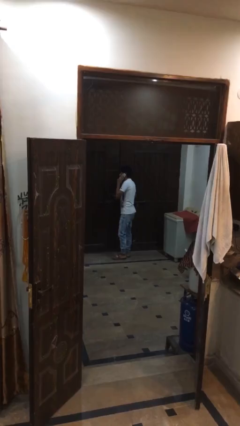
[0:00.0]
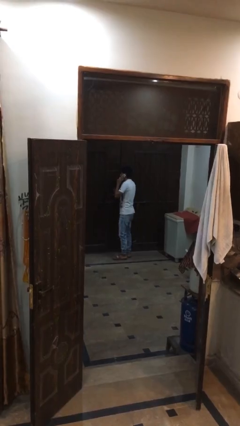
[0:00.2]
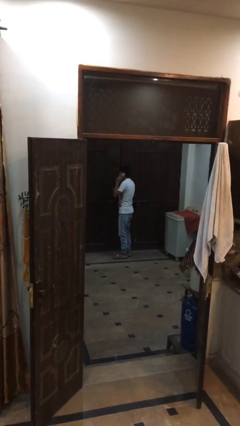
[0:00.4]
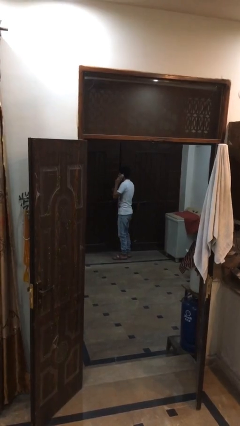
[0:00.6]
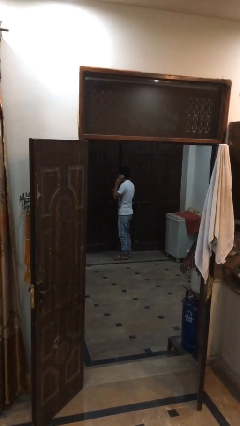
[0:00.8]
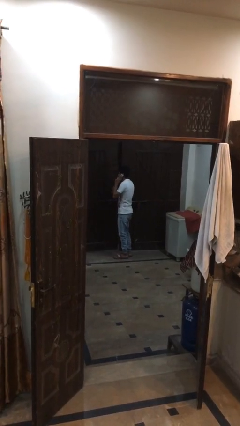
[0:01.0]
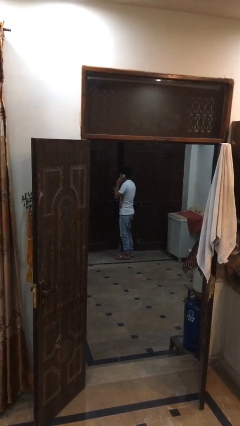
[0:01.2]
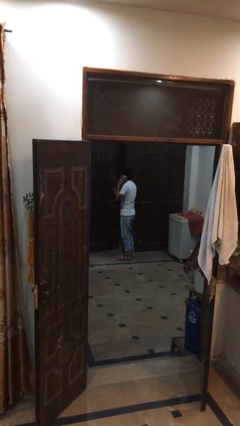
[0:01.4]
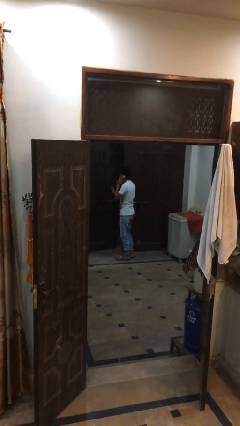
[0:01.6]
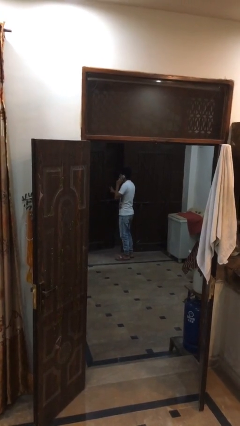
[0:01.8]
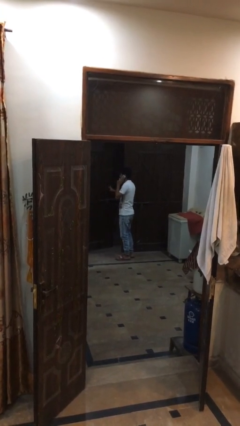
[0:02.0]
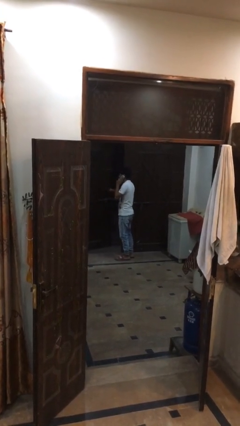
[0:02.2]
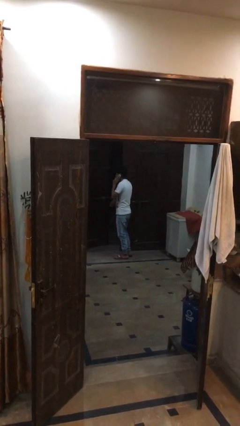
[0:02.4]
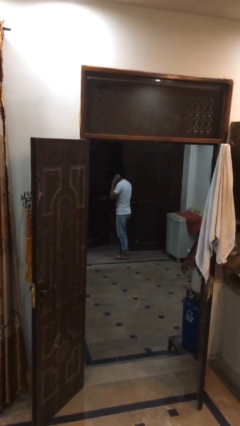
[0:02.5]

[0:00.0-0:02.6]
person opens facility door

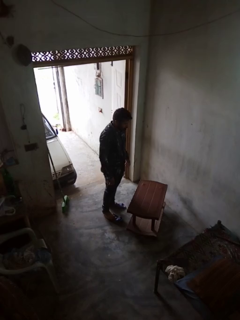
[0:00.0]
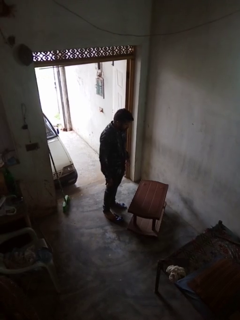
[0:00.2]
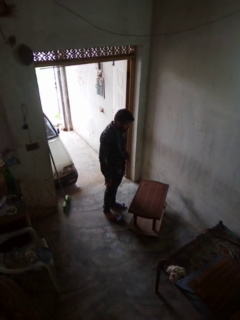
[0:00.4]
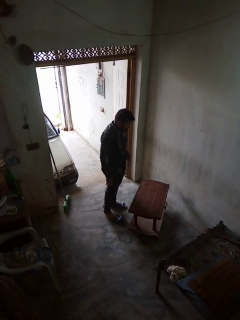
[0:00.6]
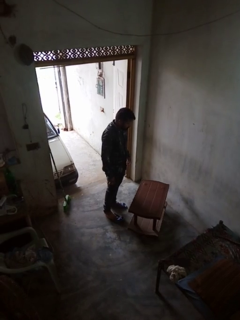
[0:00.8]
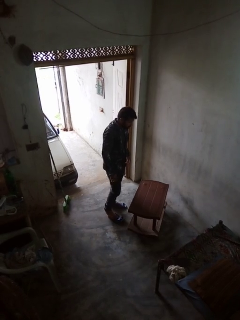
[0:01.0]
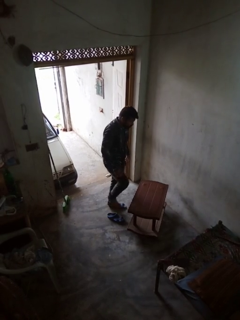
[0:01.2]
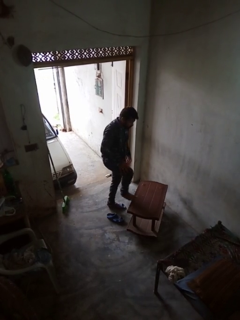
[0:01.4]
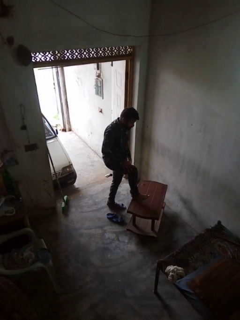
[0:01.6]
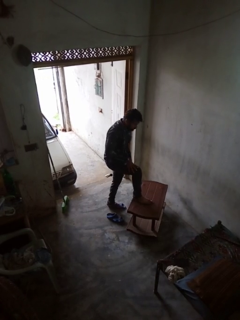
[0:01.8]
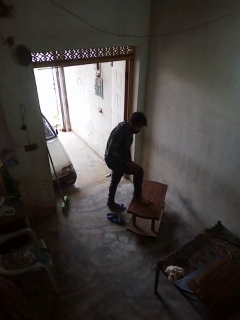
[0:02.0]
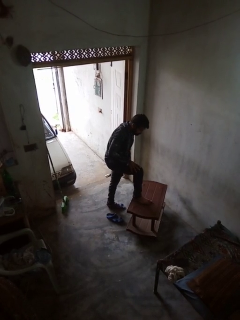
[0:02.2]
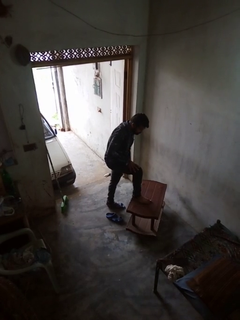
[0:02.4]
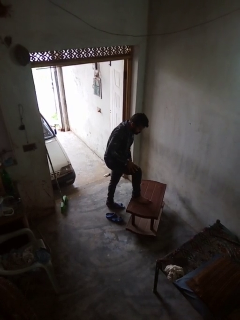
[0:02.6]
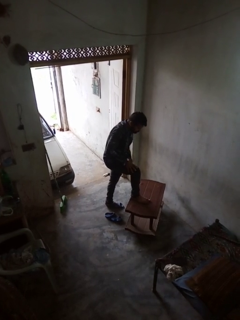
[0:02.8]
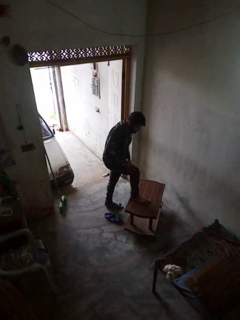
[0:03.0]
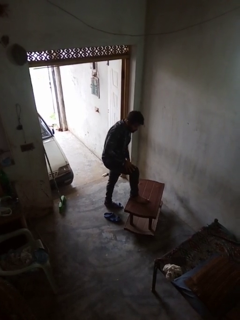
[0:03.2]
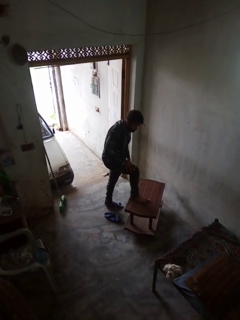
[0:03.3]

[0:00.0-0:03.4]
person puts feet up

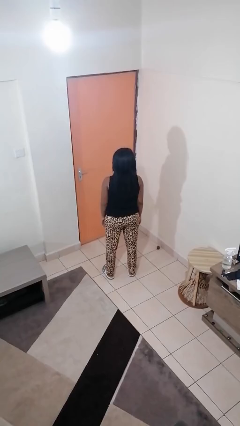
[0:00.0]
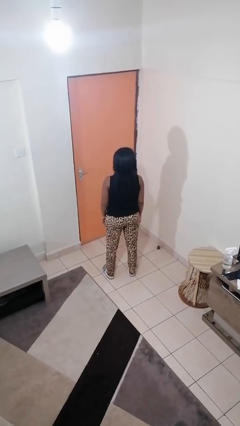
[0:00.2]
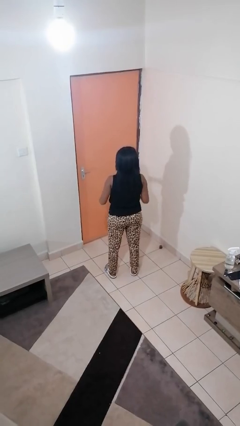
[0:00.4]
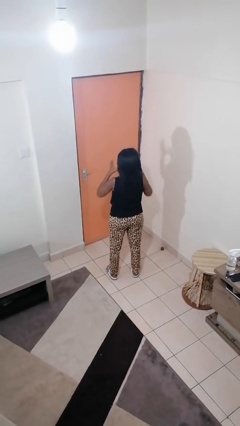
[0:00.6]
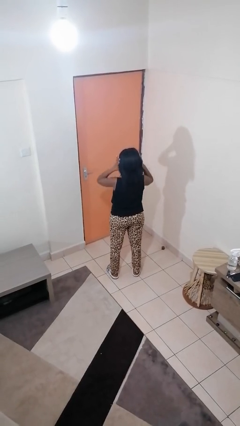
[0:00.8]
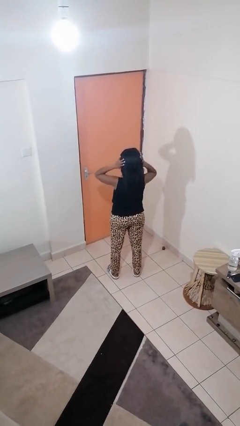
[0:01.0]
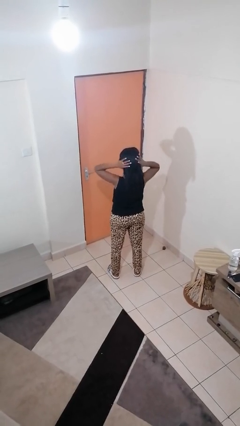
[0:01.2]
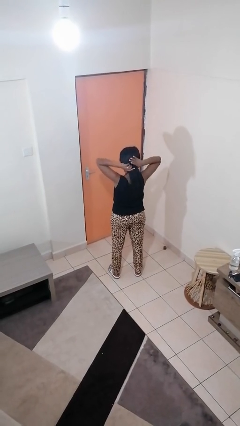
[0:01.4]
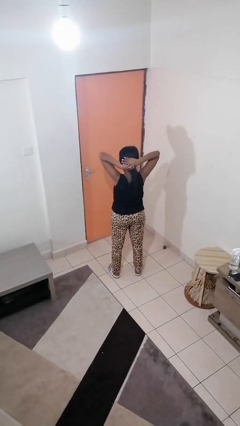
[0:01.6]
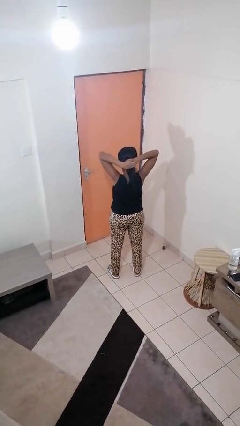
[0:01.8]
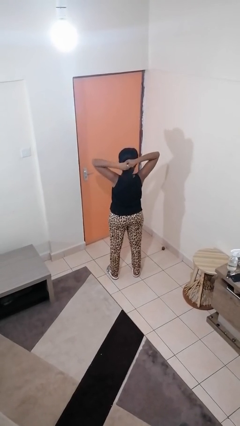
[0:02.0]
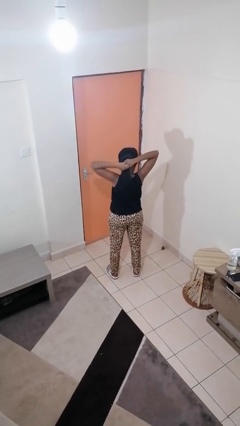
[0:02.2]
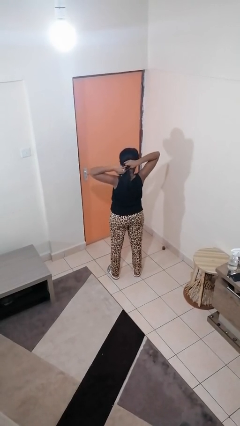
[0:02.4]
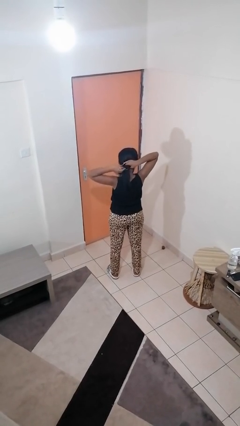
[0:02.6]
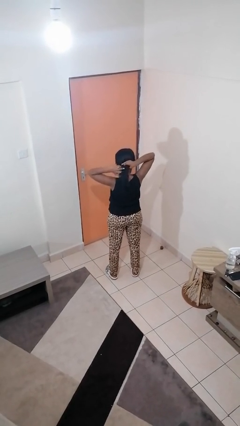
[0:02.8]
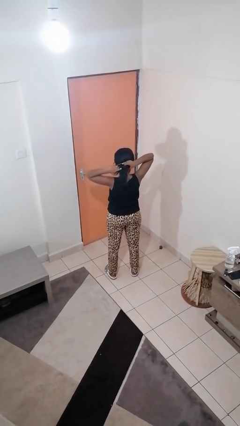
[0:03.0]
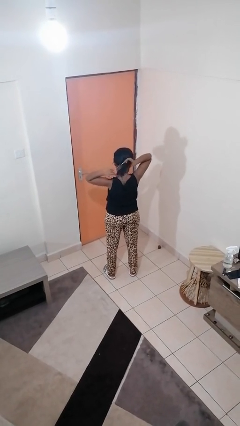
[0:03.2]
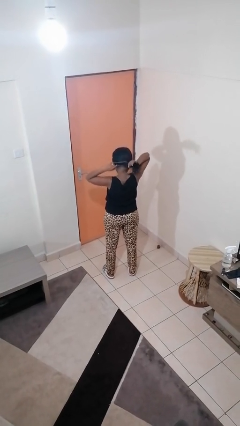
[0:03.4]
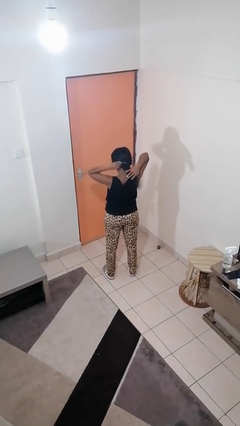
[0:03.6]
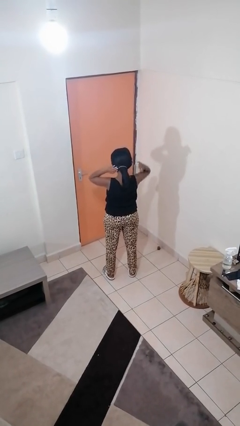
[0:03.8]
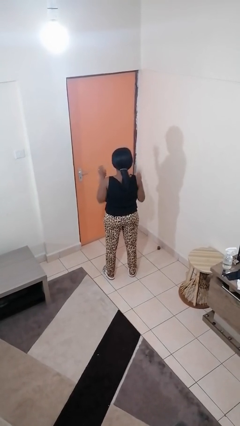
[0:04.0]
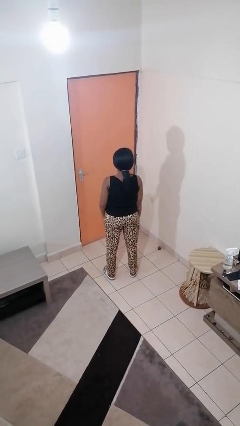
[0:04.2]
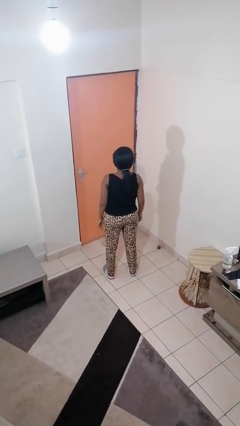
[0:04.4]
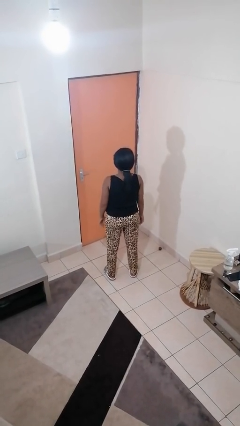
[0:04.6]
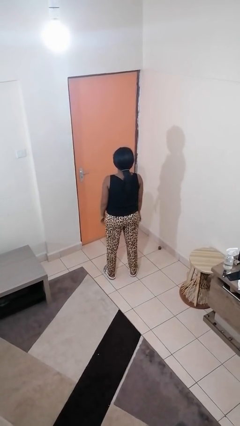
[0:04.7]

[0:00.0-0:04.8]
person puts hair in ponytail

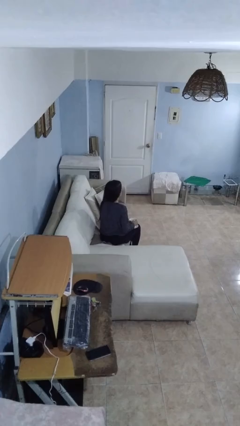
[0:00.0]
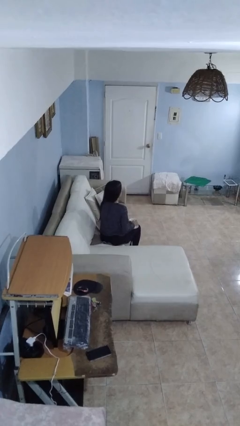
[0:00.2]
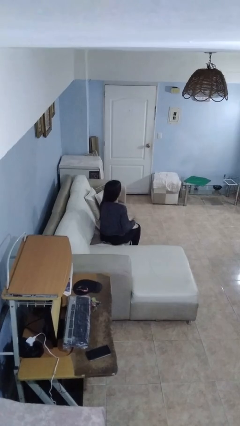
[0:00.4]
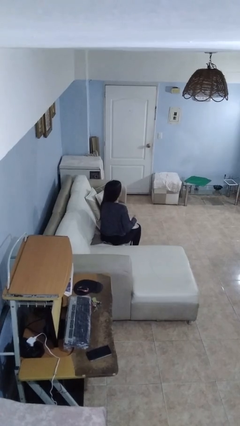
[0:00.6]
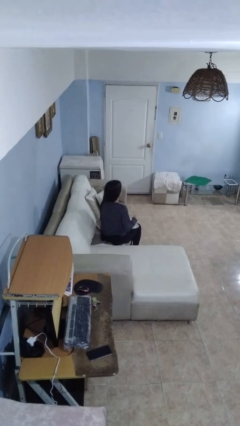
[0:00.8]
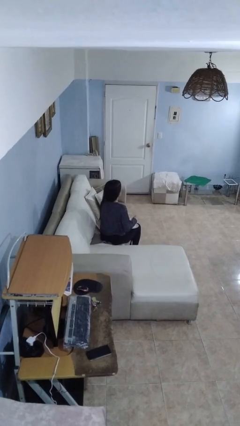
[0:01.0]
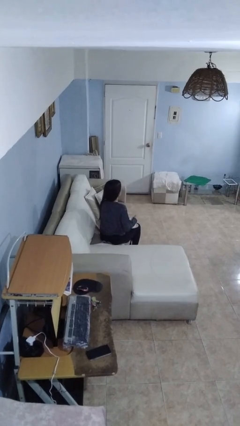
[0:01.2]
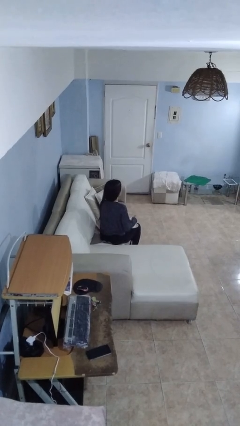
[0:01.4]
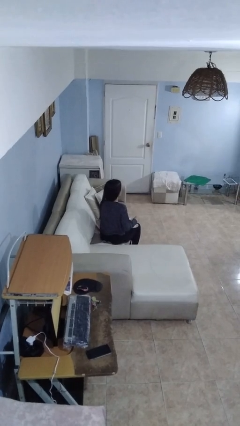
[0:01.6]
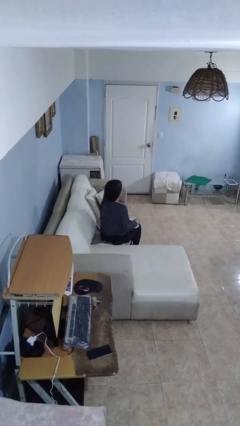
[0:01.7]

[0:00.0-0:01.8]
person stirs mug

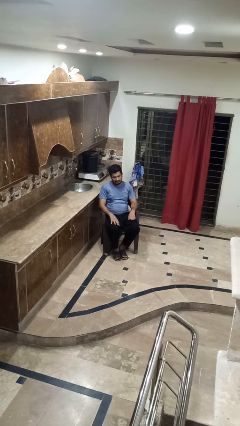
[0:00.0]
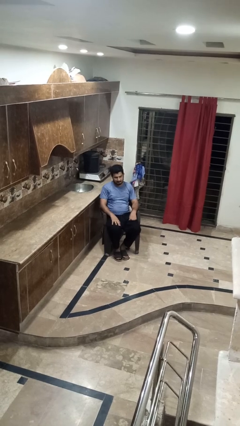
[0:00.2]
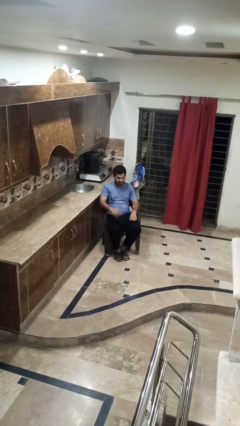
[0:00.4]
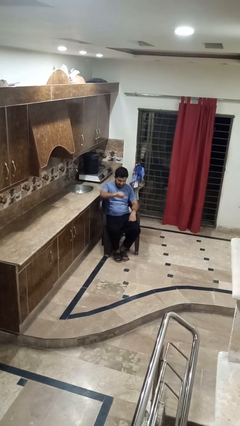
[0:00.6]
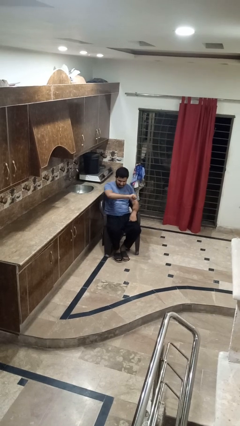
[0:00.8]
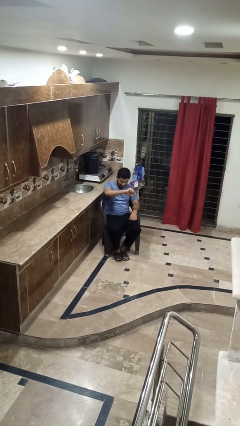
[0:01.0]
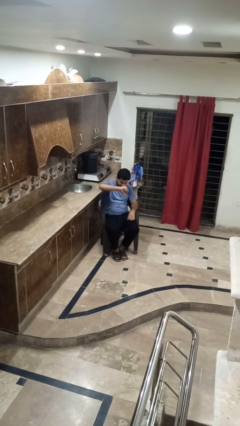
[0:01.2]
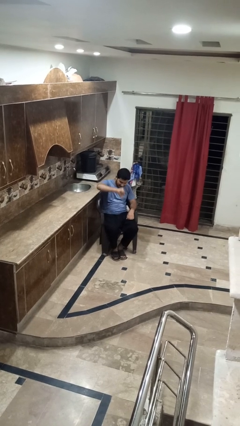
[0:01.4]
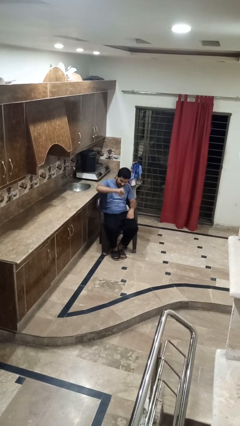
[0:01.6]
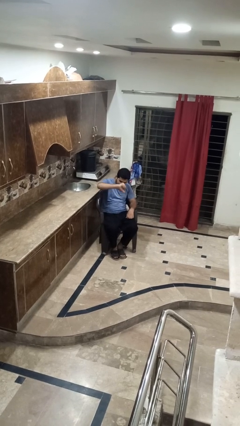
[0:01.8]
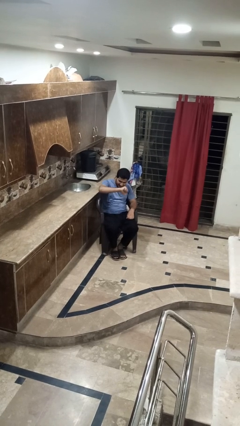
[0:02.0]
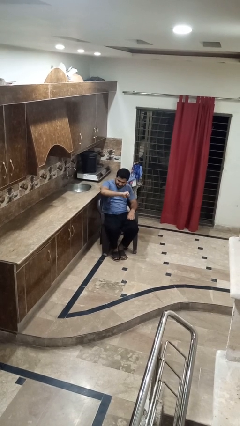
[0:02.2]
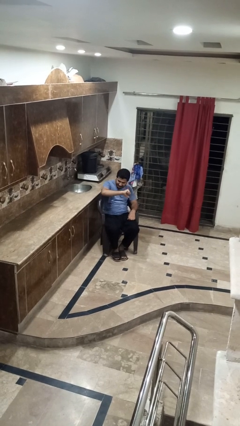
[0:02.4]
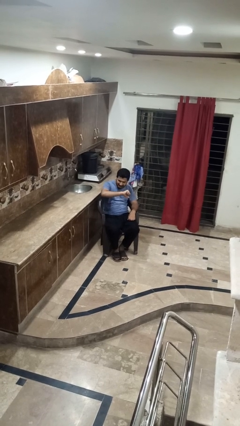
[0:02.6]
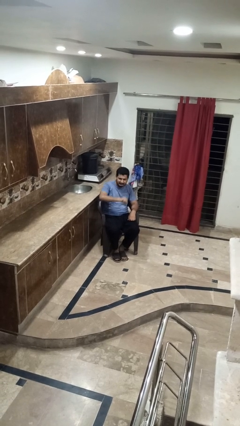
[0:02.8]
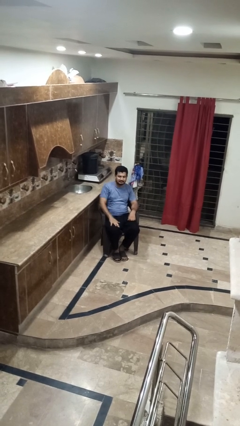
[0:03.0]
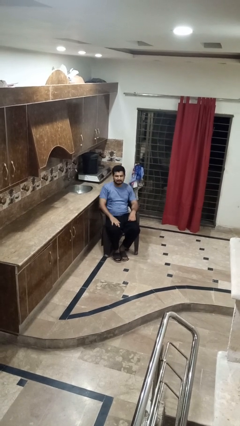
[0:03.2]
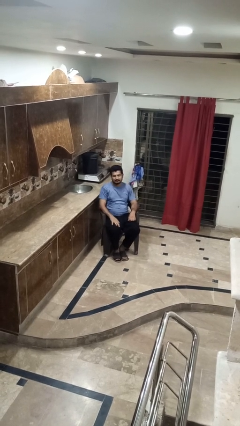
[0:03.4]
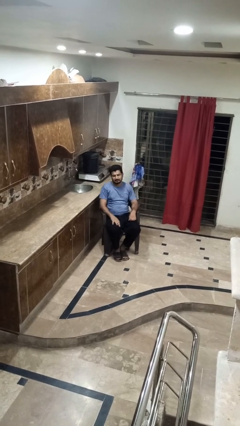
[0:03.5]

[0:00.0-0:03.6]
person gestures thumbs down

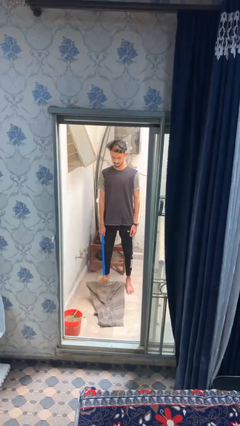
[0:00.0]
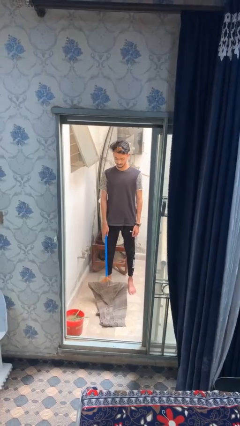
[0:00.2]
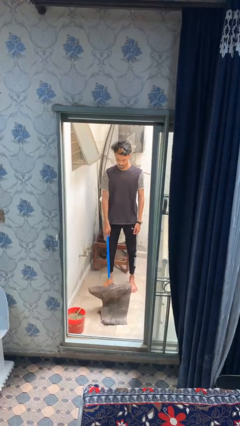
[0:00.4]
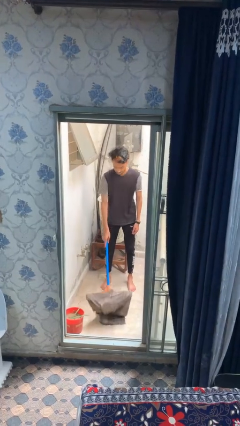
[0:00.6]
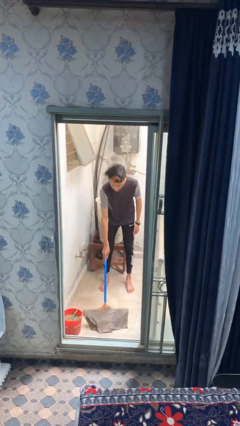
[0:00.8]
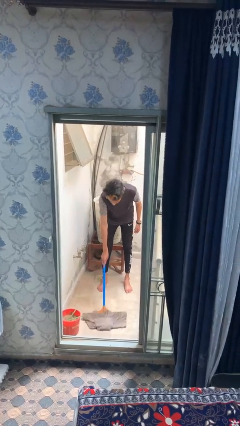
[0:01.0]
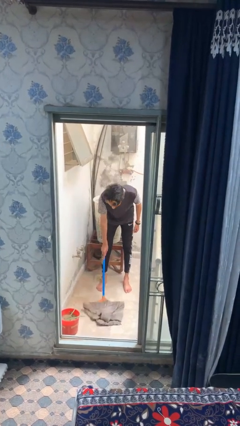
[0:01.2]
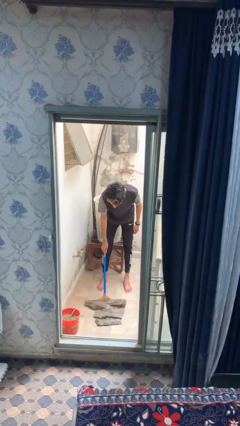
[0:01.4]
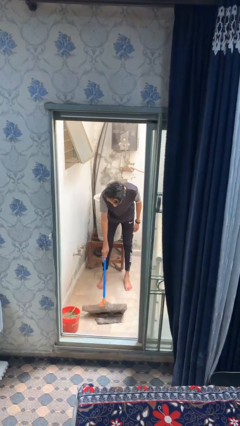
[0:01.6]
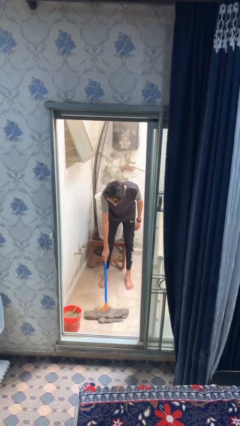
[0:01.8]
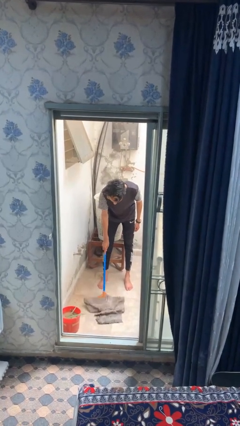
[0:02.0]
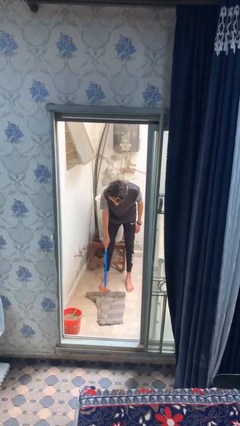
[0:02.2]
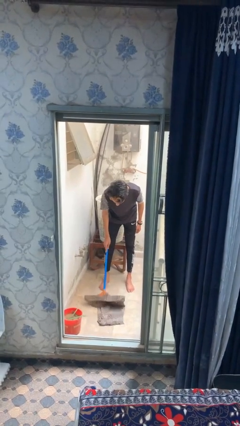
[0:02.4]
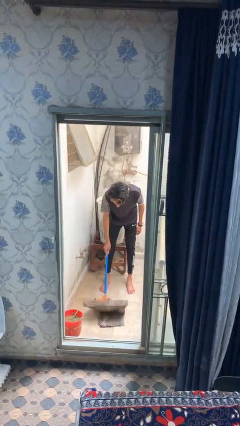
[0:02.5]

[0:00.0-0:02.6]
person mops
